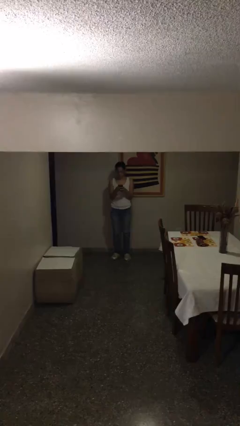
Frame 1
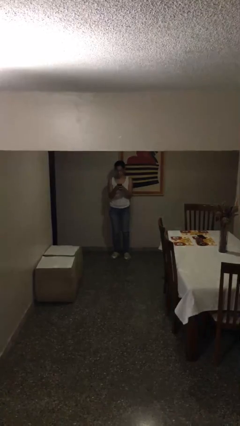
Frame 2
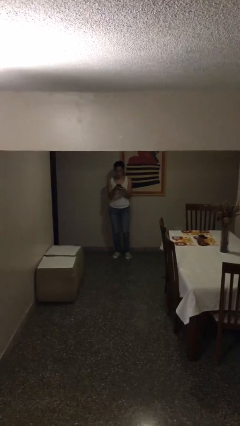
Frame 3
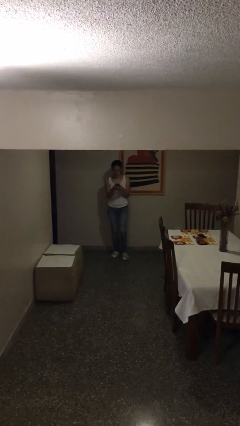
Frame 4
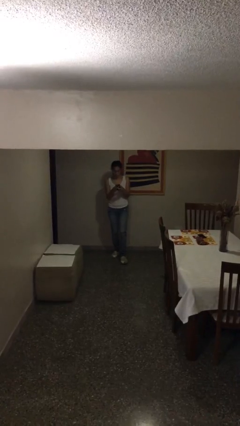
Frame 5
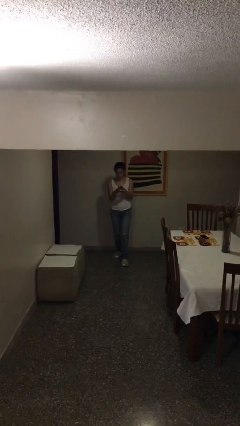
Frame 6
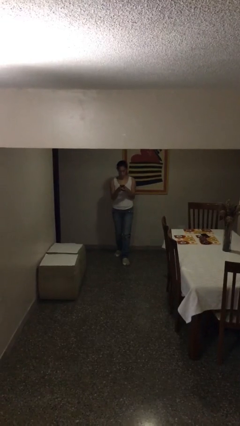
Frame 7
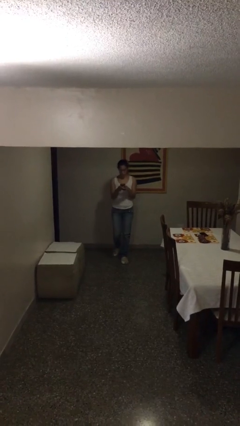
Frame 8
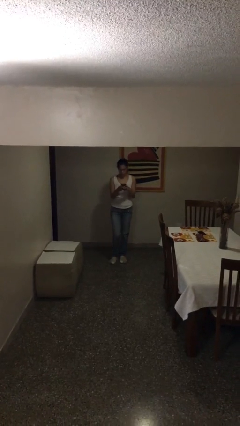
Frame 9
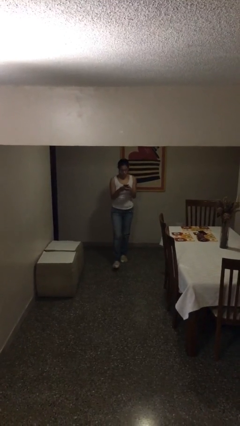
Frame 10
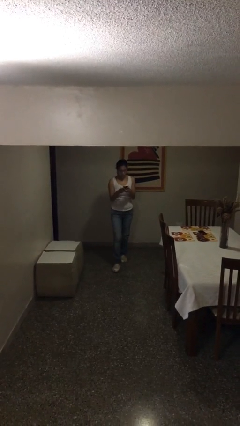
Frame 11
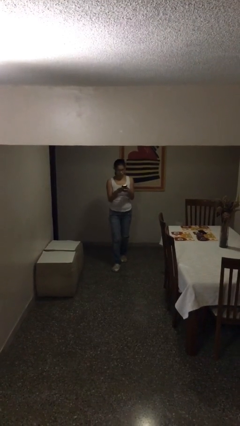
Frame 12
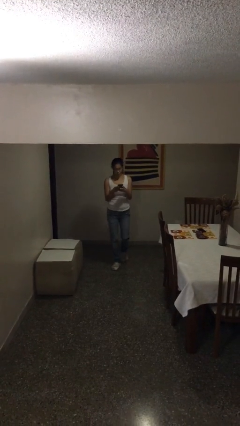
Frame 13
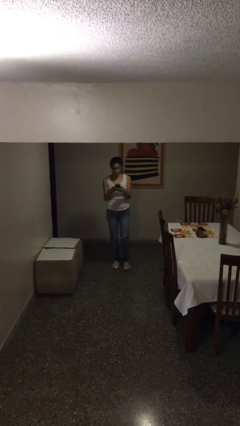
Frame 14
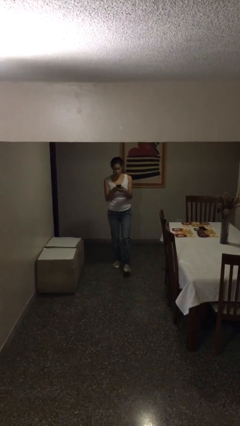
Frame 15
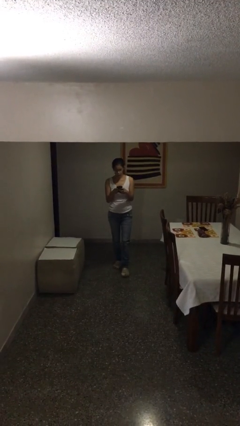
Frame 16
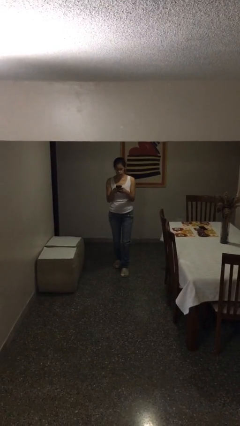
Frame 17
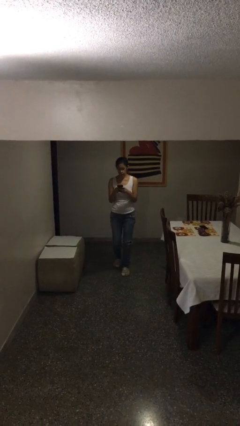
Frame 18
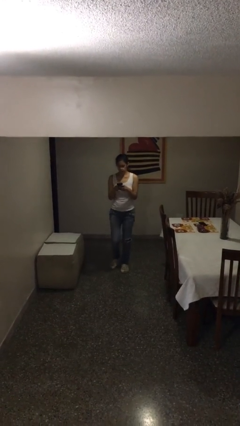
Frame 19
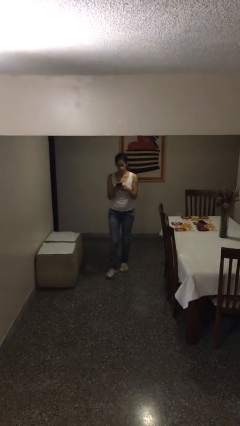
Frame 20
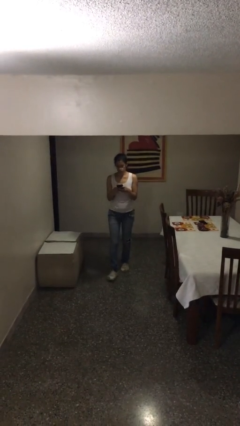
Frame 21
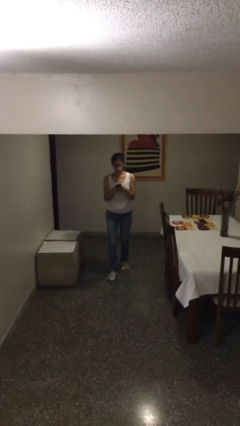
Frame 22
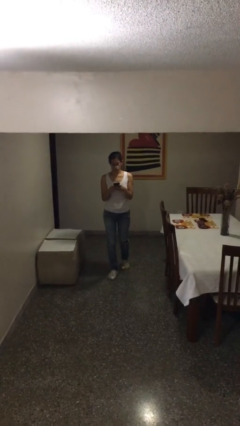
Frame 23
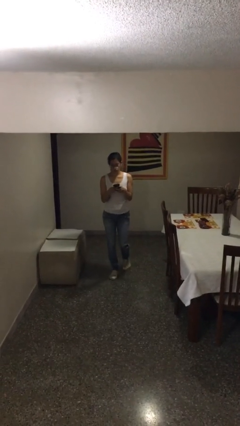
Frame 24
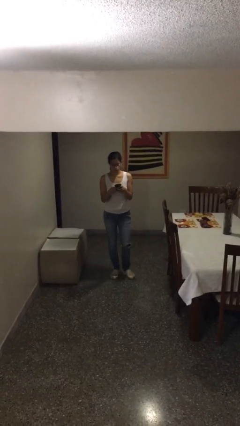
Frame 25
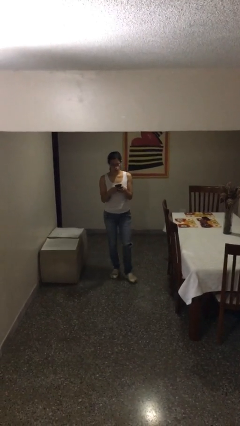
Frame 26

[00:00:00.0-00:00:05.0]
person texts on phone

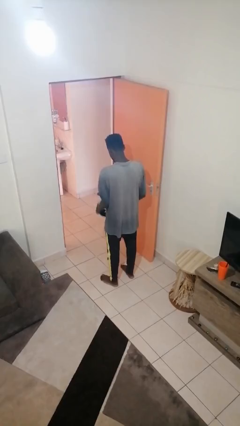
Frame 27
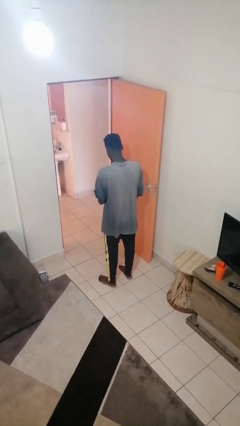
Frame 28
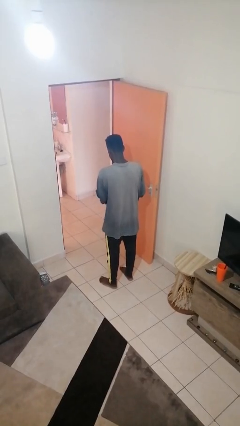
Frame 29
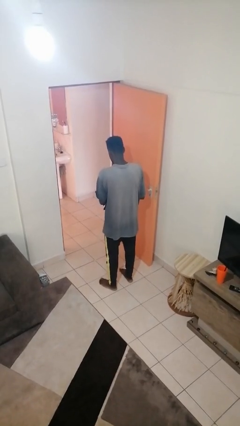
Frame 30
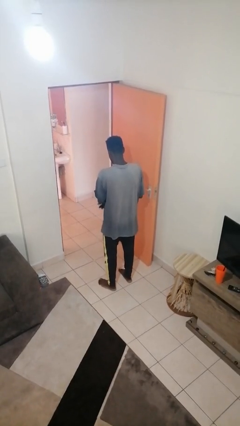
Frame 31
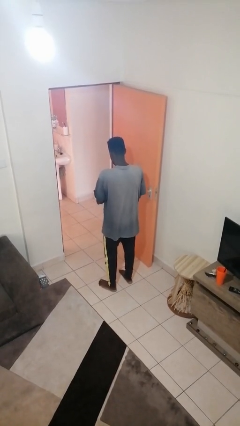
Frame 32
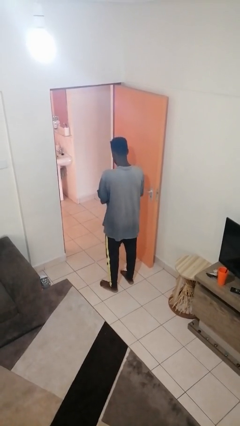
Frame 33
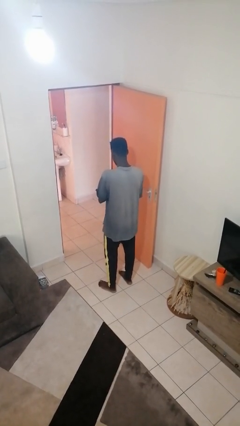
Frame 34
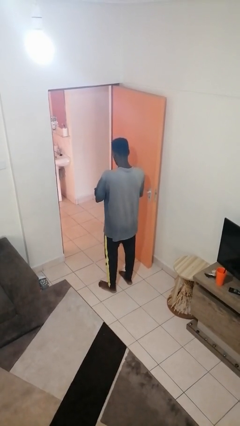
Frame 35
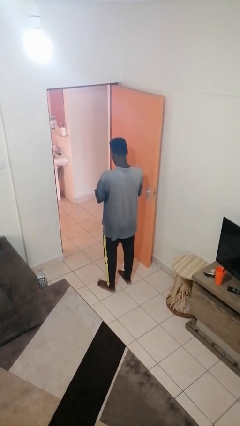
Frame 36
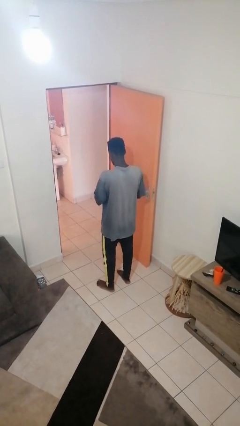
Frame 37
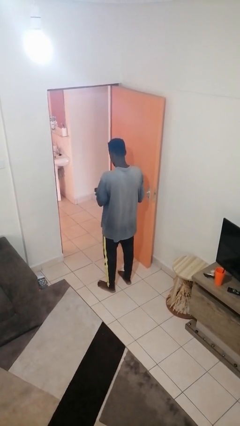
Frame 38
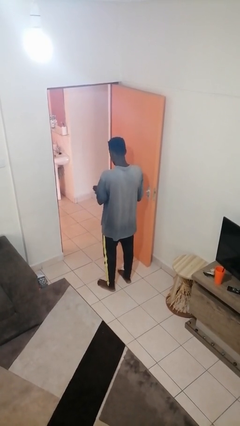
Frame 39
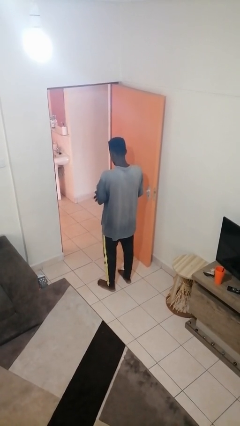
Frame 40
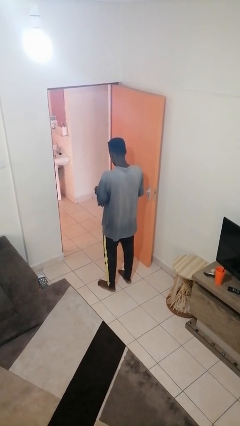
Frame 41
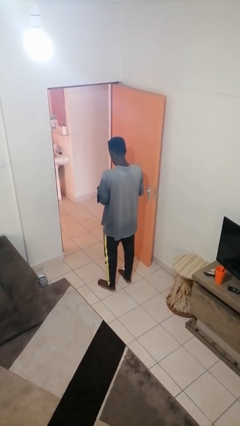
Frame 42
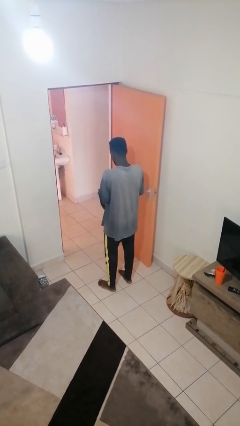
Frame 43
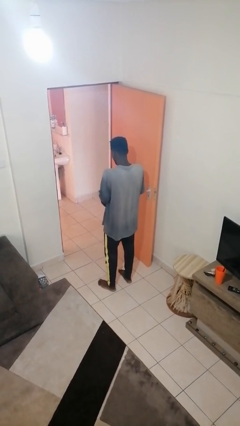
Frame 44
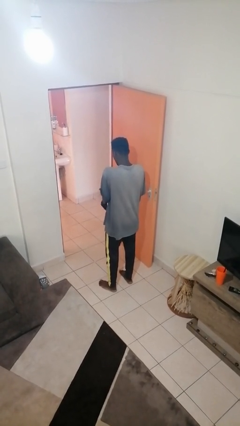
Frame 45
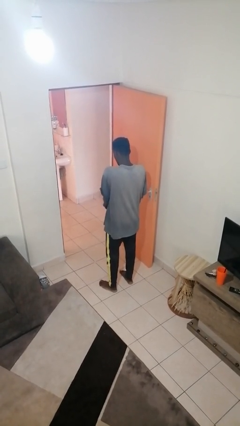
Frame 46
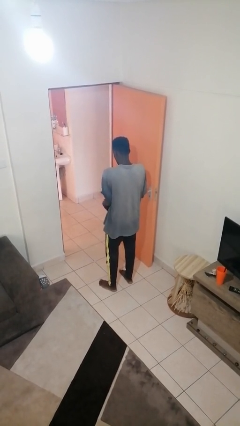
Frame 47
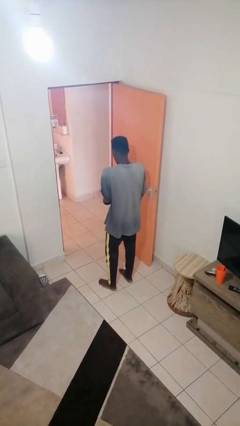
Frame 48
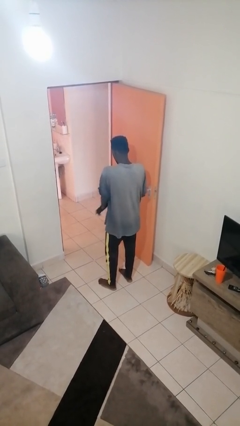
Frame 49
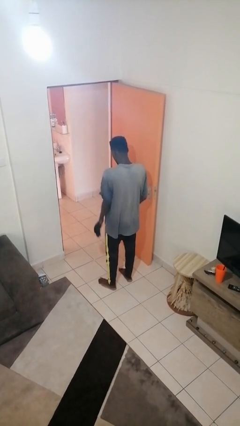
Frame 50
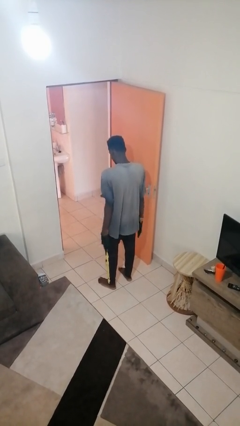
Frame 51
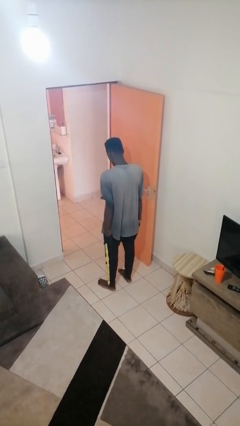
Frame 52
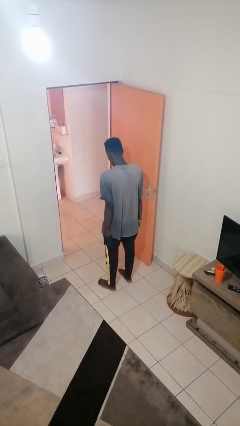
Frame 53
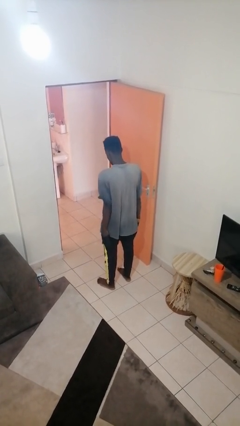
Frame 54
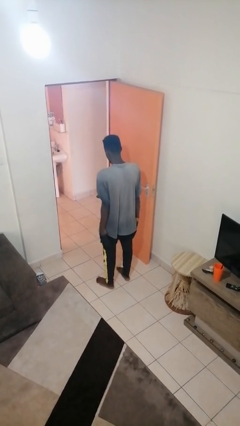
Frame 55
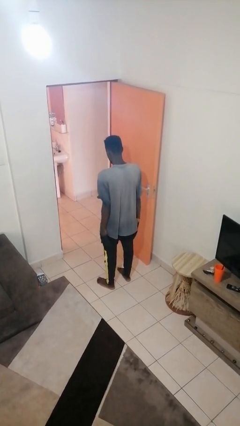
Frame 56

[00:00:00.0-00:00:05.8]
person puts on gloves

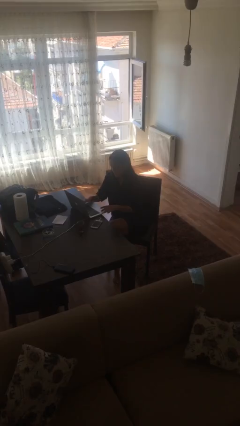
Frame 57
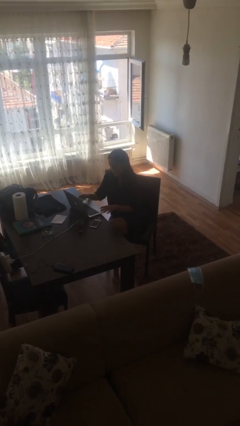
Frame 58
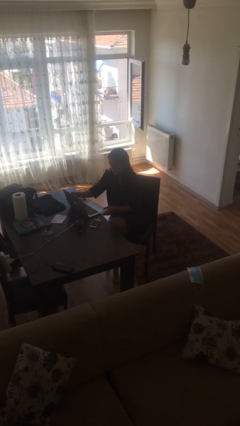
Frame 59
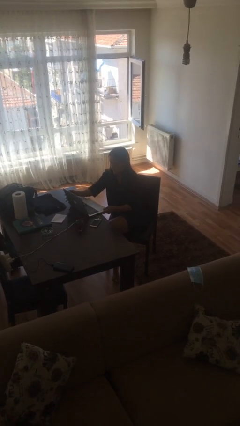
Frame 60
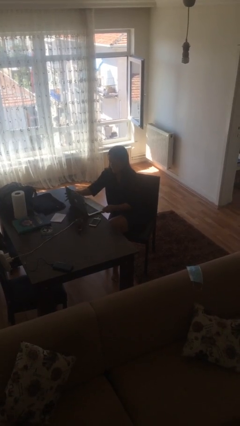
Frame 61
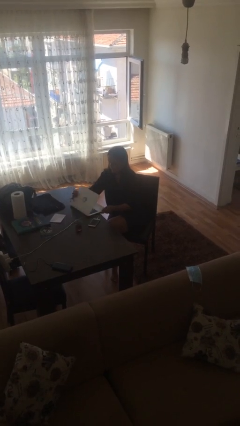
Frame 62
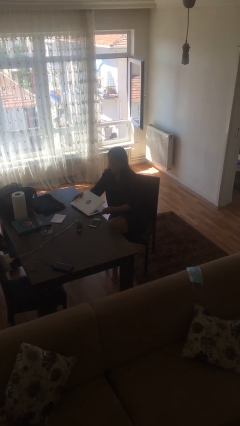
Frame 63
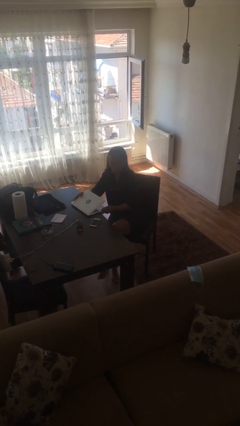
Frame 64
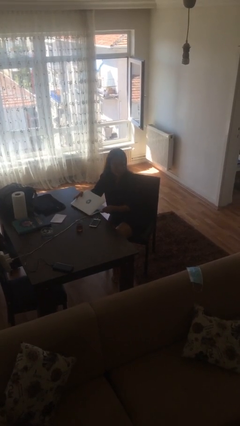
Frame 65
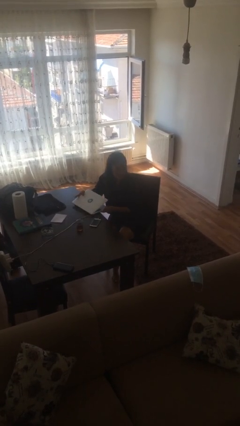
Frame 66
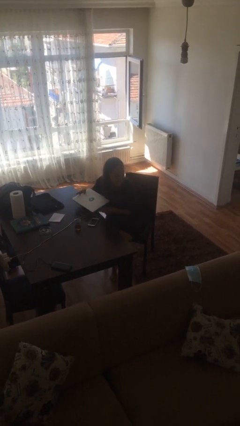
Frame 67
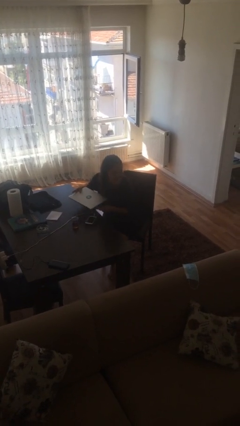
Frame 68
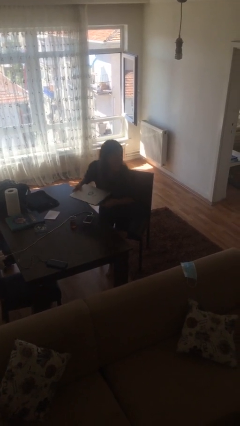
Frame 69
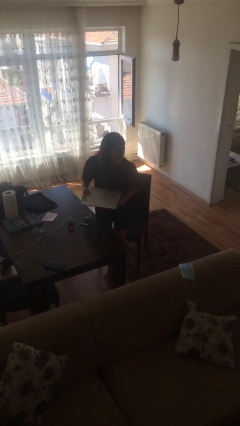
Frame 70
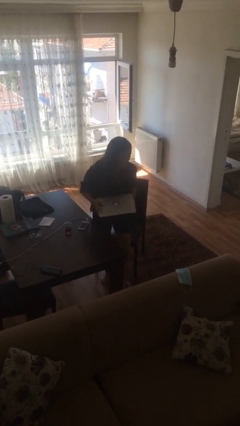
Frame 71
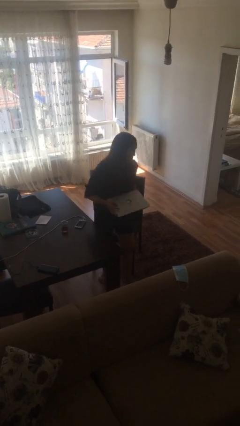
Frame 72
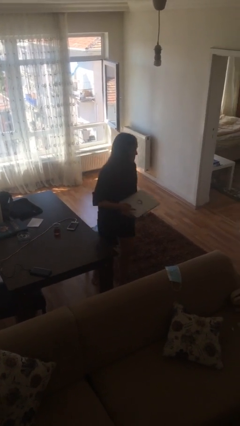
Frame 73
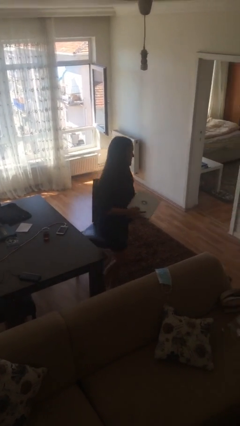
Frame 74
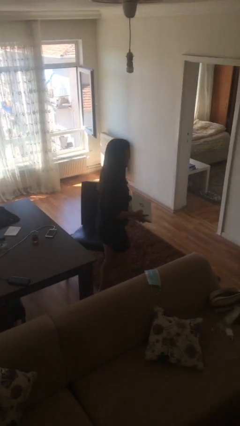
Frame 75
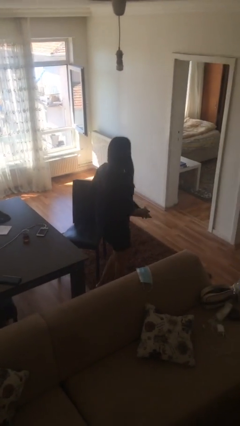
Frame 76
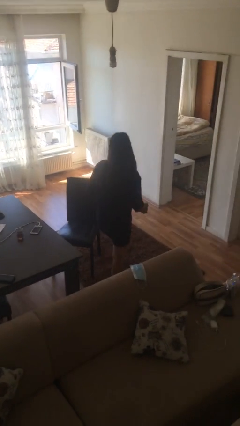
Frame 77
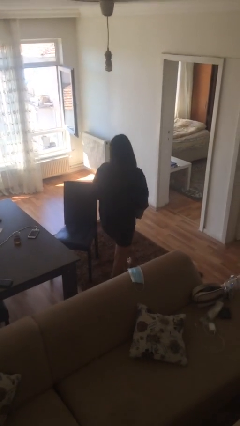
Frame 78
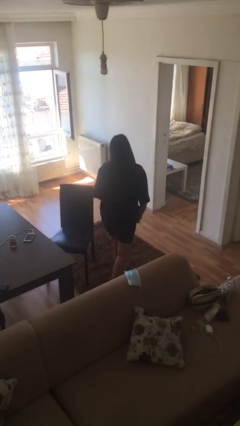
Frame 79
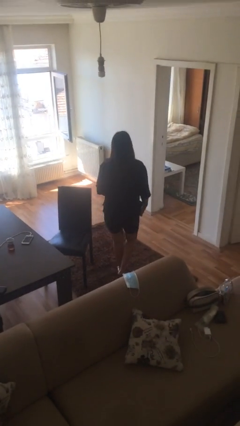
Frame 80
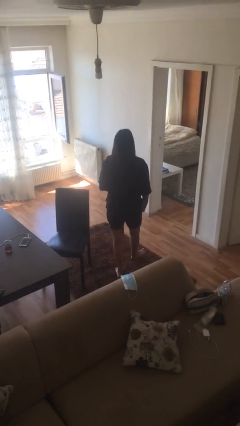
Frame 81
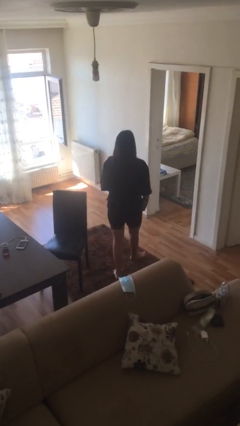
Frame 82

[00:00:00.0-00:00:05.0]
person stands up

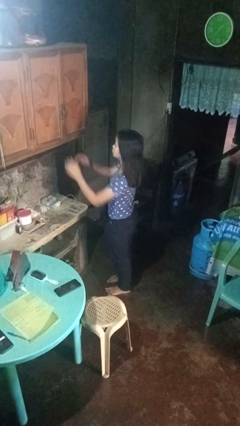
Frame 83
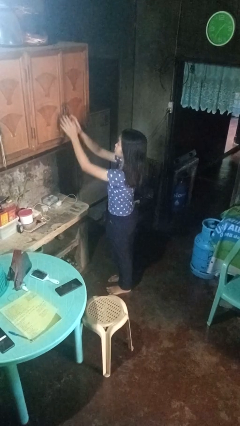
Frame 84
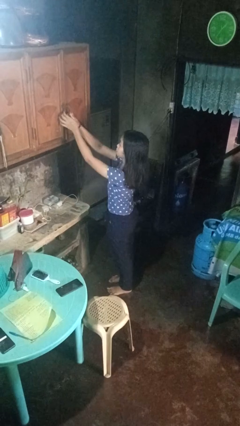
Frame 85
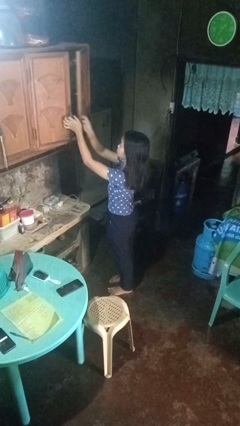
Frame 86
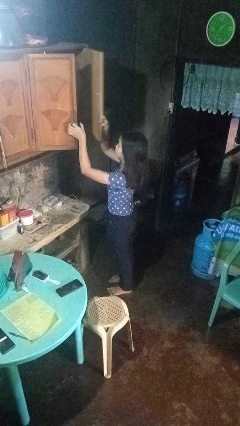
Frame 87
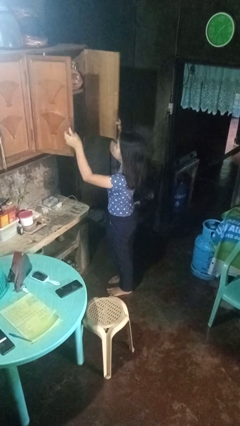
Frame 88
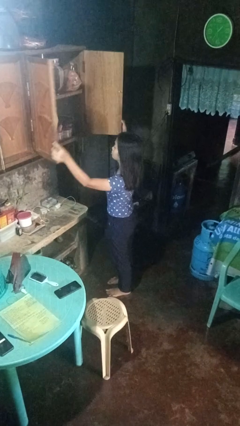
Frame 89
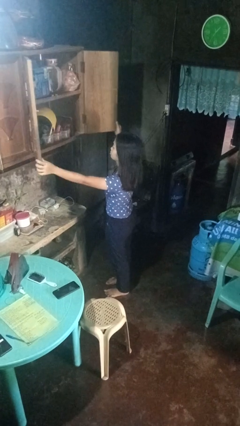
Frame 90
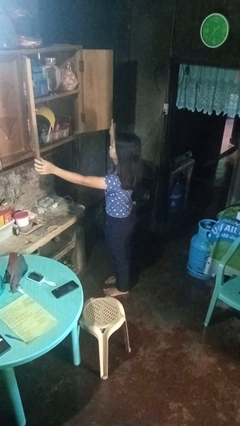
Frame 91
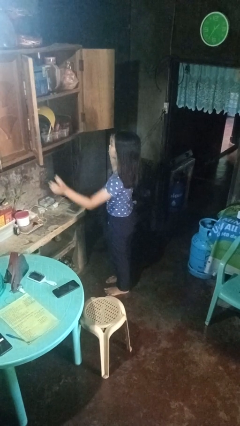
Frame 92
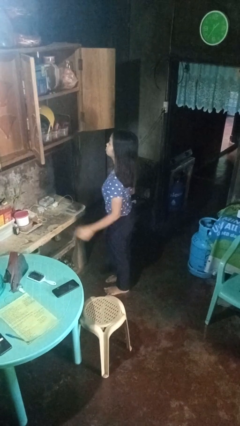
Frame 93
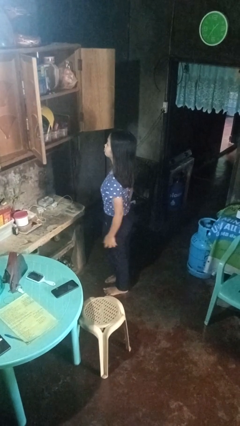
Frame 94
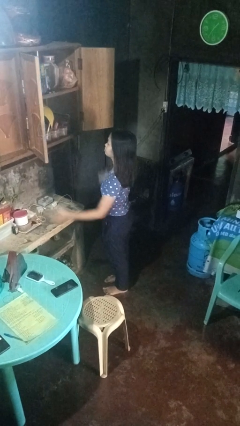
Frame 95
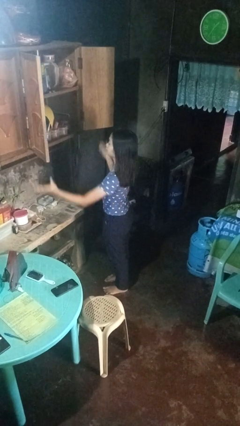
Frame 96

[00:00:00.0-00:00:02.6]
person opens cabinet
